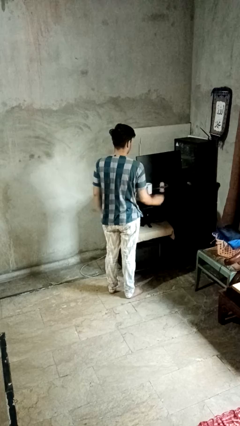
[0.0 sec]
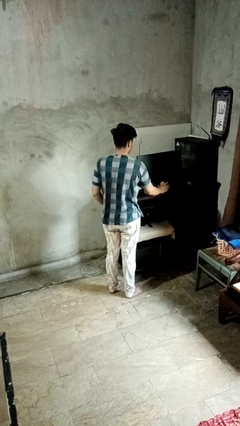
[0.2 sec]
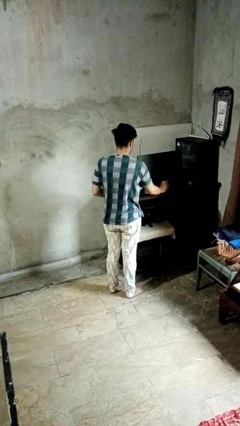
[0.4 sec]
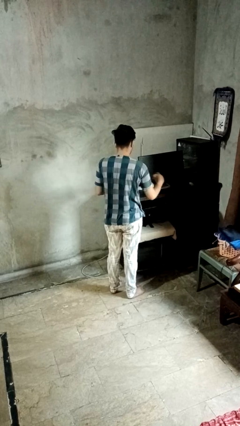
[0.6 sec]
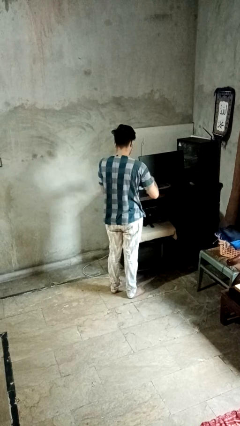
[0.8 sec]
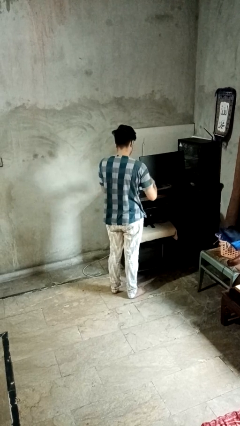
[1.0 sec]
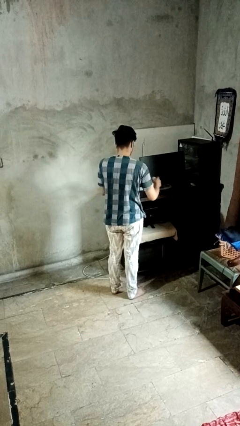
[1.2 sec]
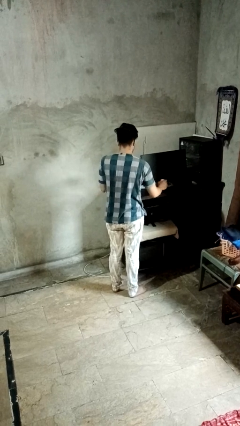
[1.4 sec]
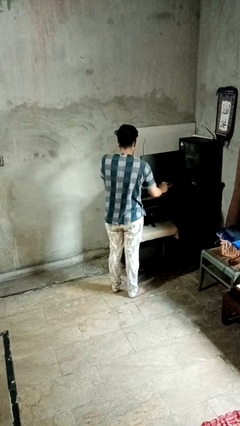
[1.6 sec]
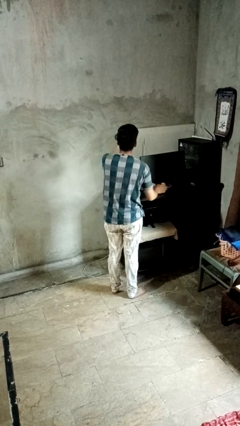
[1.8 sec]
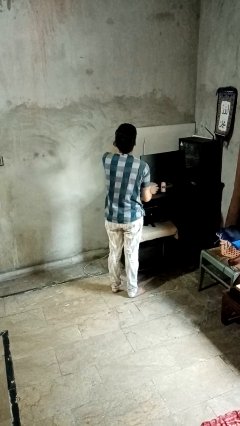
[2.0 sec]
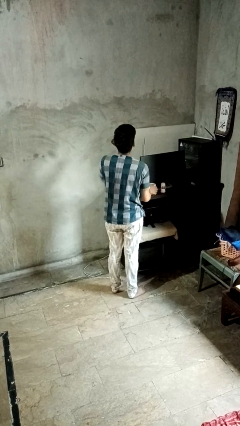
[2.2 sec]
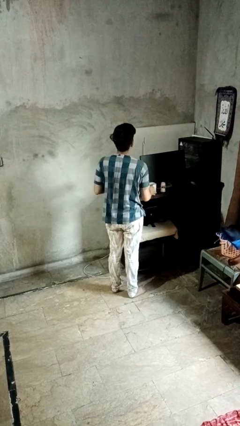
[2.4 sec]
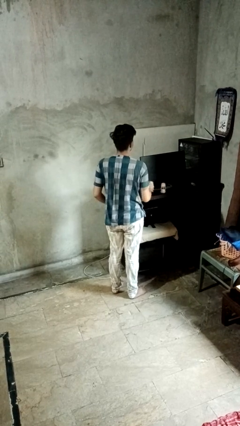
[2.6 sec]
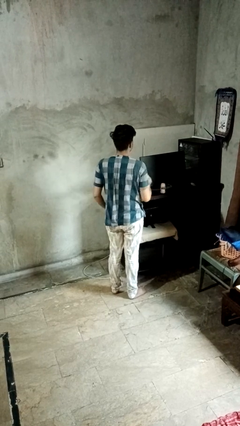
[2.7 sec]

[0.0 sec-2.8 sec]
person takes medicine pills

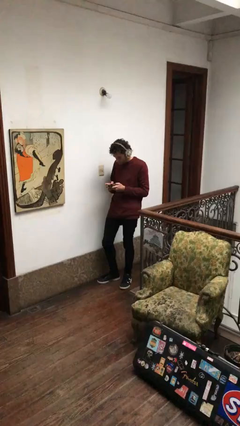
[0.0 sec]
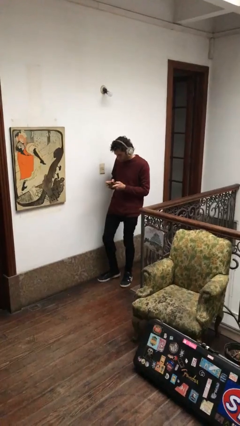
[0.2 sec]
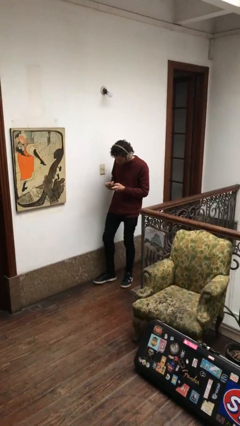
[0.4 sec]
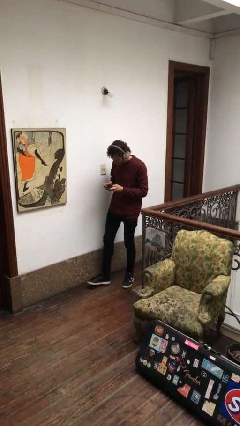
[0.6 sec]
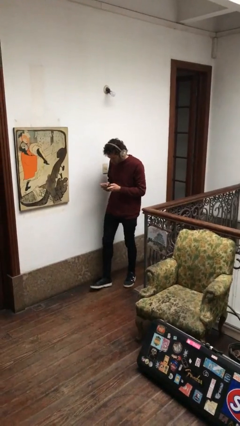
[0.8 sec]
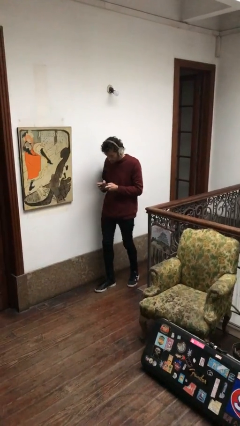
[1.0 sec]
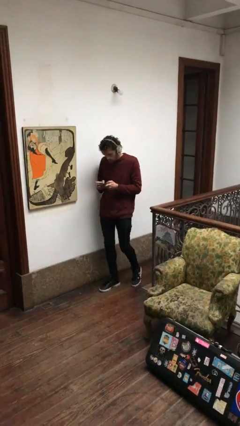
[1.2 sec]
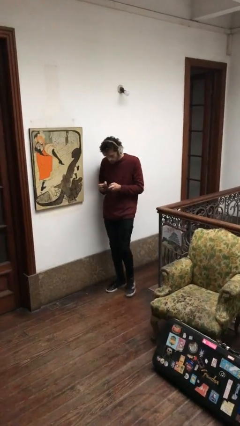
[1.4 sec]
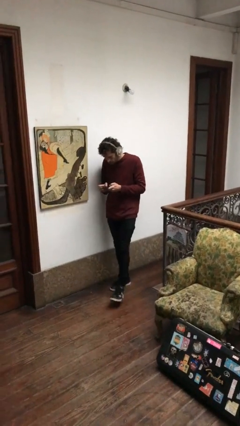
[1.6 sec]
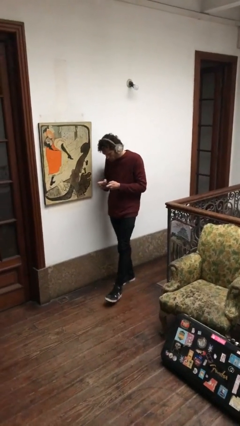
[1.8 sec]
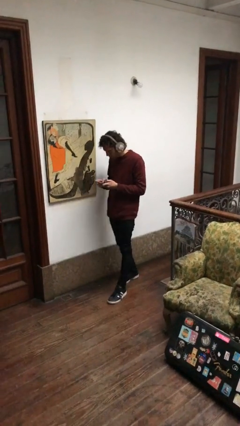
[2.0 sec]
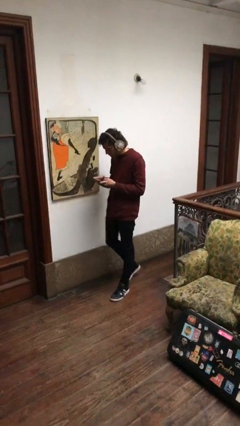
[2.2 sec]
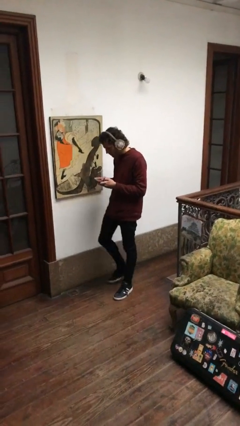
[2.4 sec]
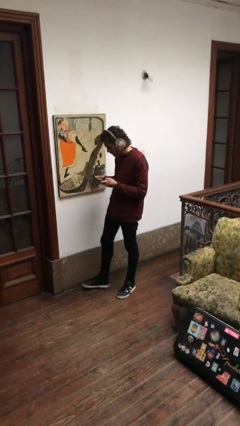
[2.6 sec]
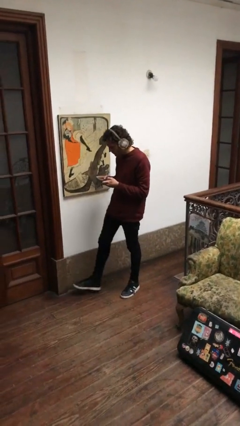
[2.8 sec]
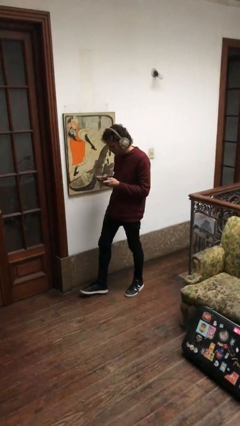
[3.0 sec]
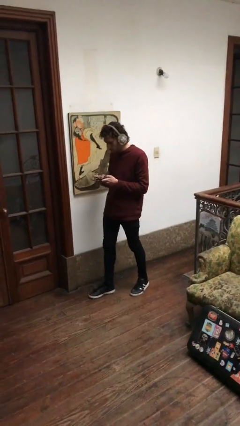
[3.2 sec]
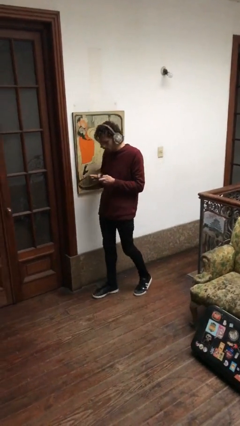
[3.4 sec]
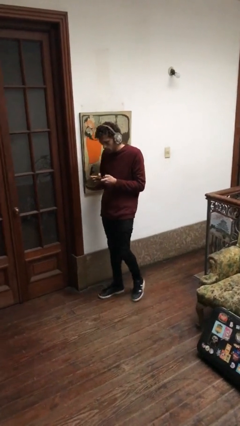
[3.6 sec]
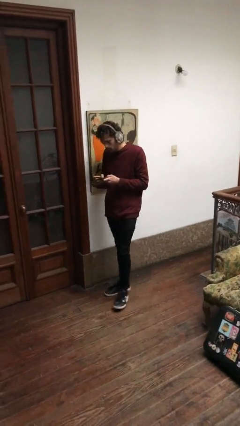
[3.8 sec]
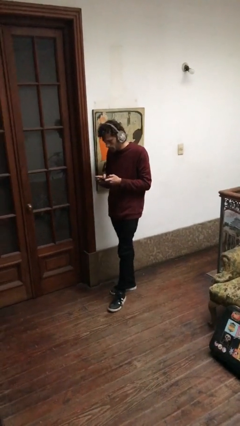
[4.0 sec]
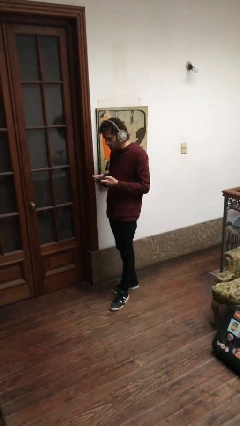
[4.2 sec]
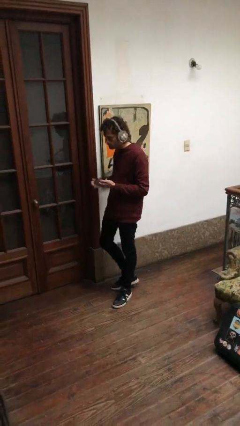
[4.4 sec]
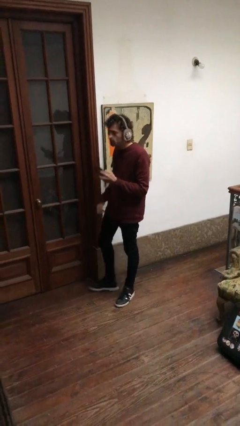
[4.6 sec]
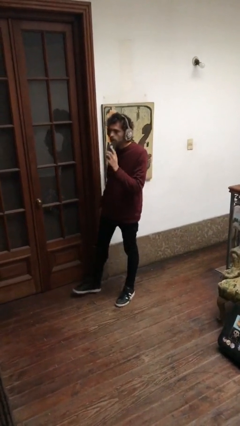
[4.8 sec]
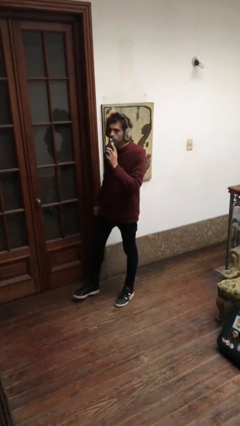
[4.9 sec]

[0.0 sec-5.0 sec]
person texts on phone

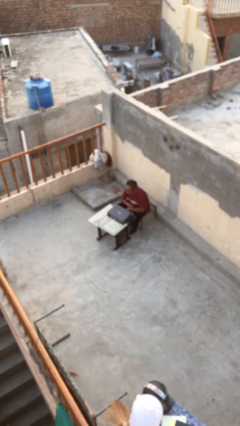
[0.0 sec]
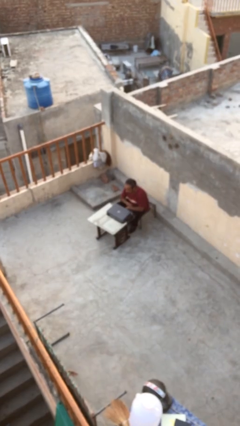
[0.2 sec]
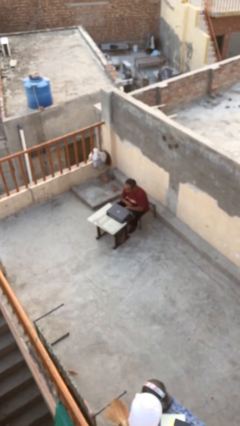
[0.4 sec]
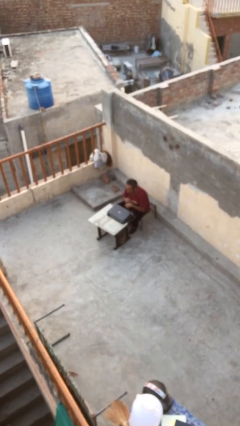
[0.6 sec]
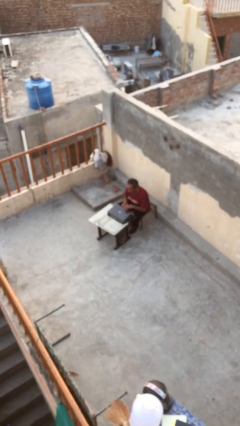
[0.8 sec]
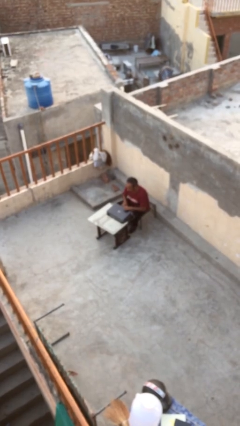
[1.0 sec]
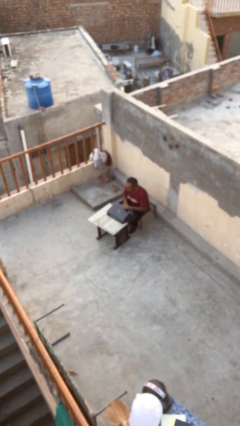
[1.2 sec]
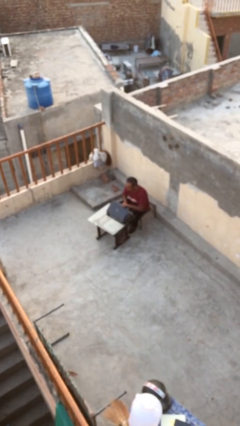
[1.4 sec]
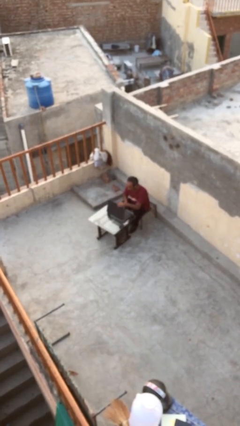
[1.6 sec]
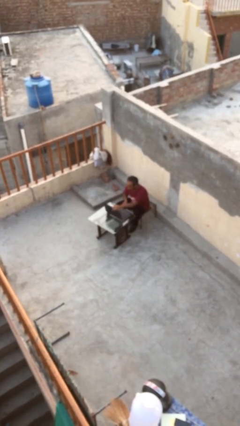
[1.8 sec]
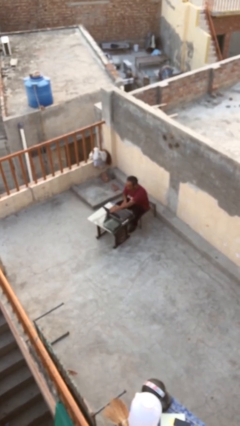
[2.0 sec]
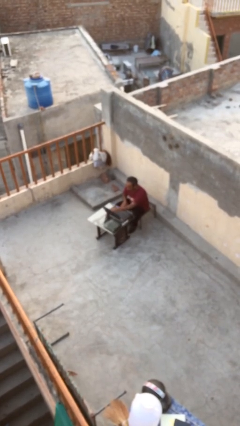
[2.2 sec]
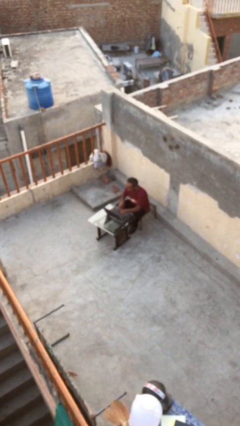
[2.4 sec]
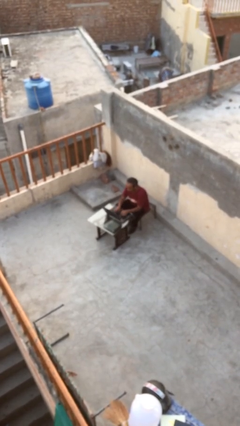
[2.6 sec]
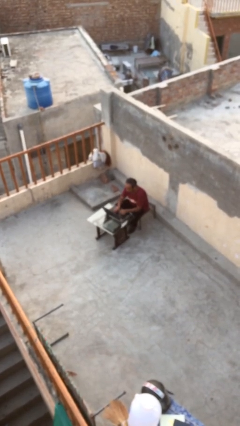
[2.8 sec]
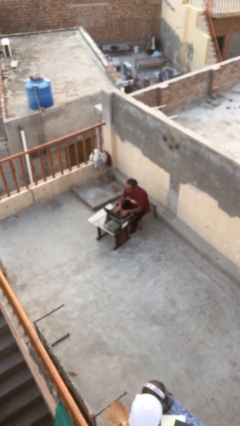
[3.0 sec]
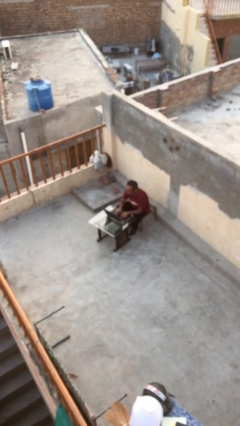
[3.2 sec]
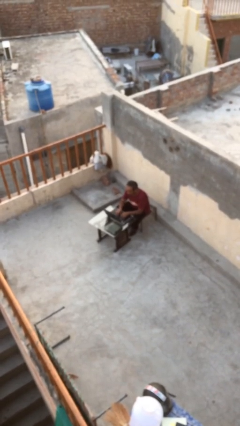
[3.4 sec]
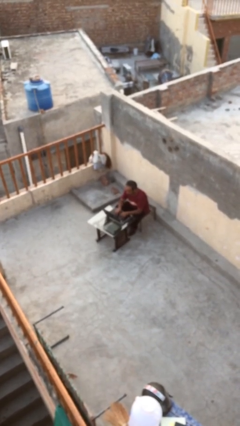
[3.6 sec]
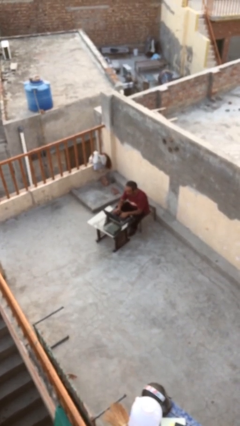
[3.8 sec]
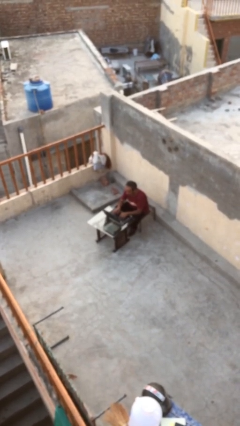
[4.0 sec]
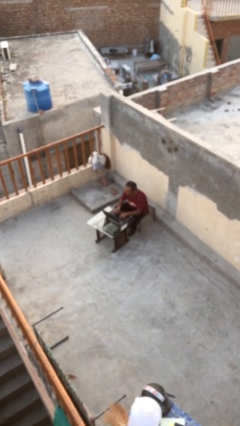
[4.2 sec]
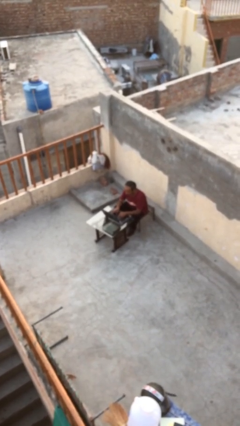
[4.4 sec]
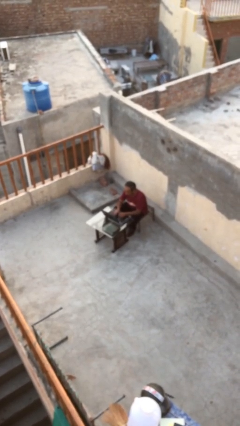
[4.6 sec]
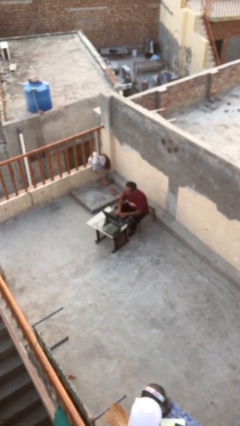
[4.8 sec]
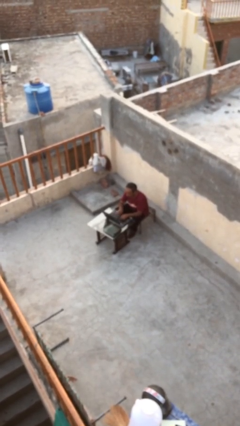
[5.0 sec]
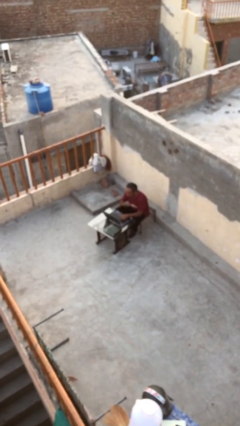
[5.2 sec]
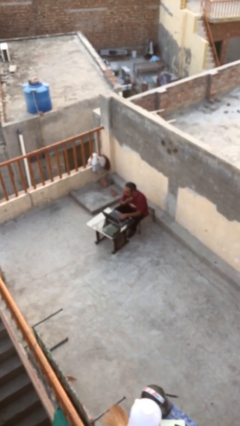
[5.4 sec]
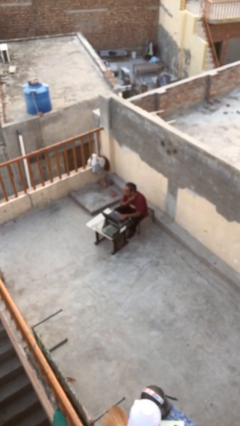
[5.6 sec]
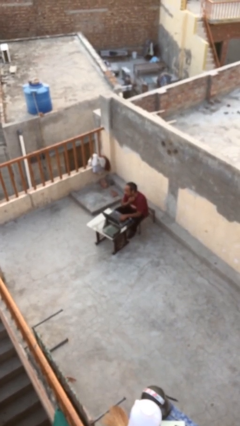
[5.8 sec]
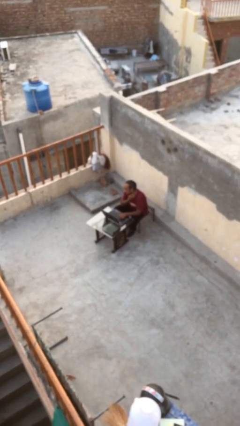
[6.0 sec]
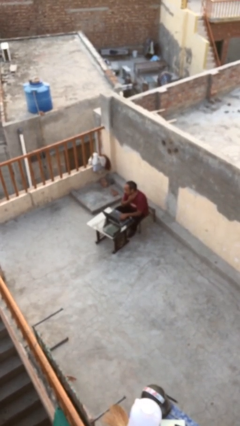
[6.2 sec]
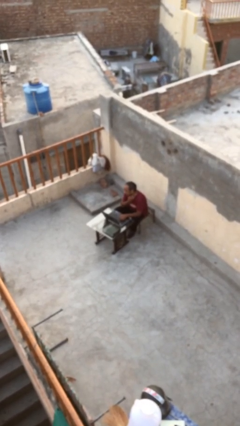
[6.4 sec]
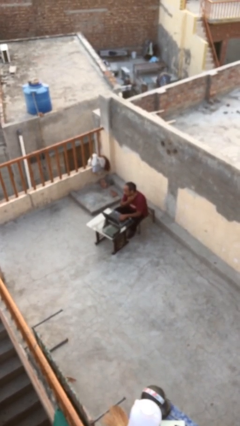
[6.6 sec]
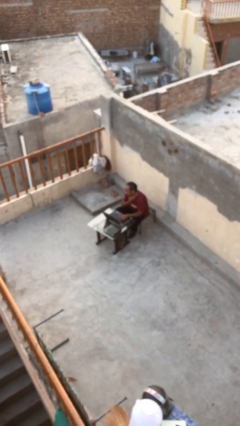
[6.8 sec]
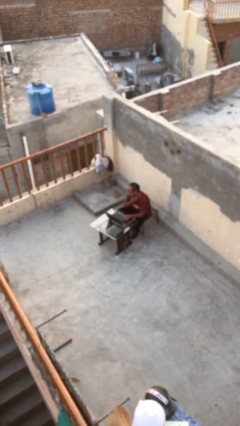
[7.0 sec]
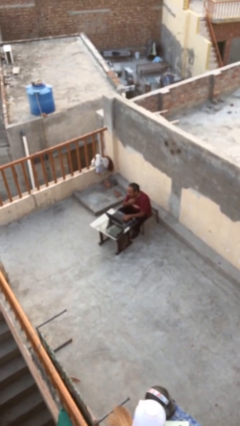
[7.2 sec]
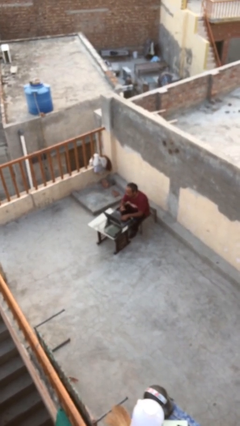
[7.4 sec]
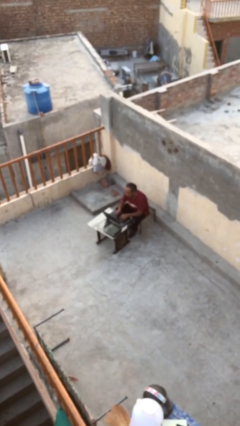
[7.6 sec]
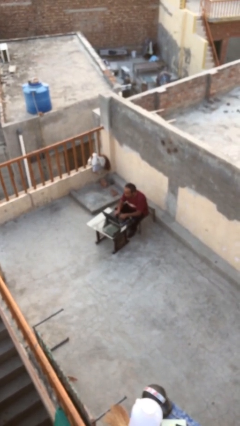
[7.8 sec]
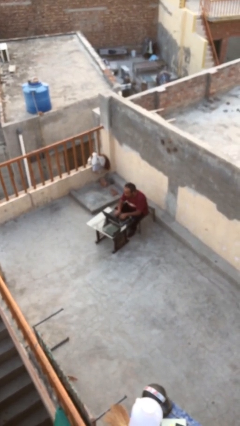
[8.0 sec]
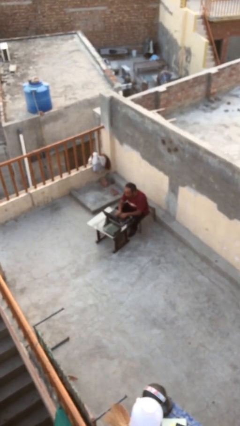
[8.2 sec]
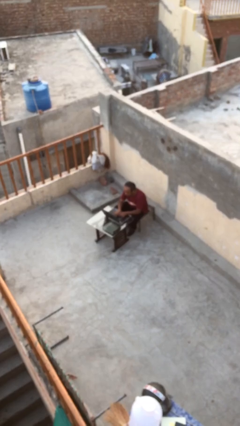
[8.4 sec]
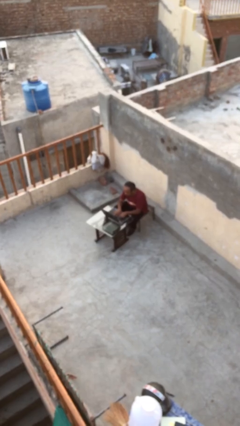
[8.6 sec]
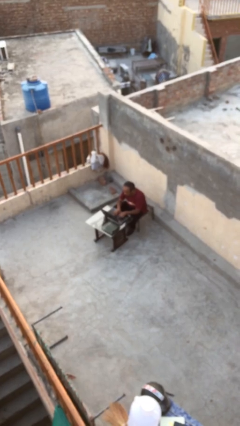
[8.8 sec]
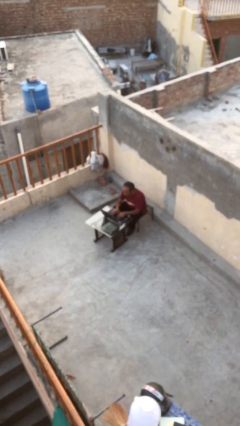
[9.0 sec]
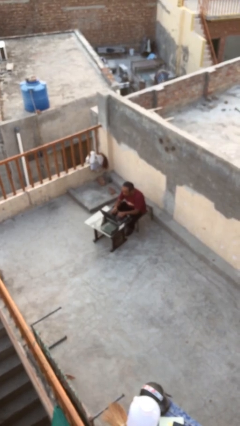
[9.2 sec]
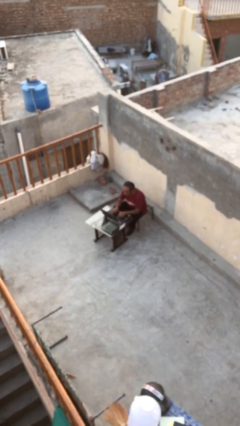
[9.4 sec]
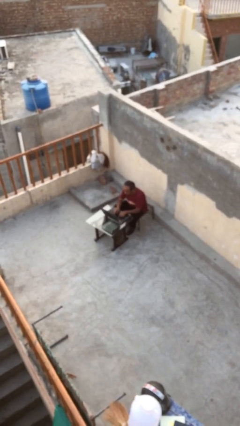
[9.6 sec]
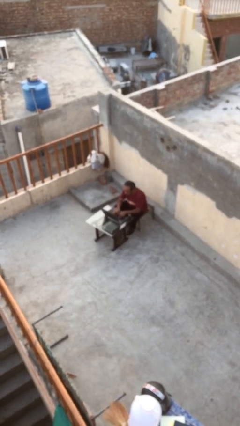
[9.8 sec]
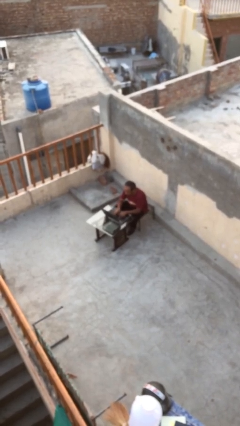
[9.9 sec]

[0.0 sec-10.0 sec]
person interacts with laptop

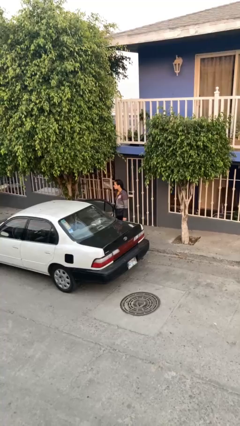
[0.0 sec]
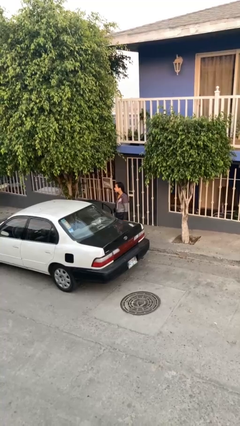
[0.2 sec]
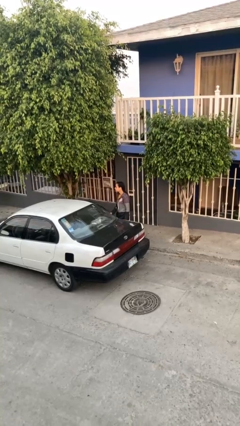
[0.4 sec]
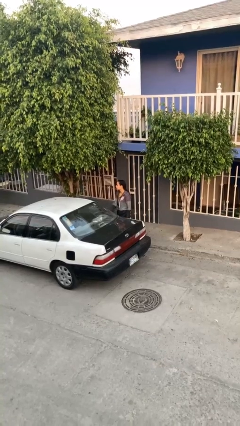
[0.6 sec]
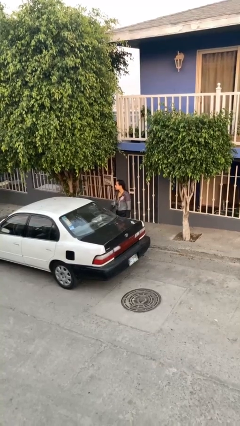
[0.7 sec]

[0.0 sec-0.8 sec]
person closes car door
